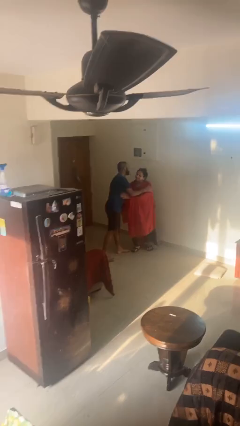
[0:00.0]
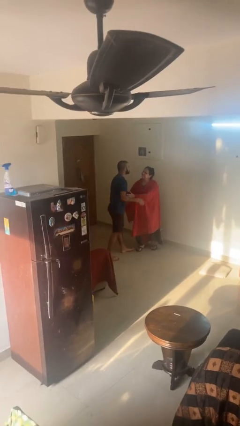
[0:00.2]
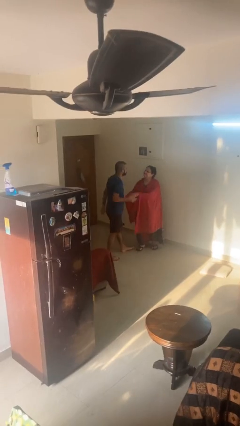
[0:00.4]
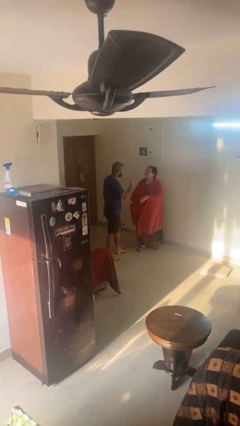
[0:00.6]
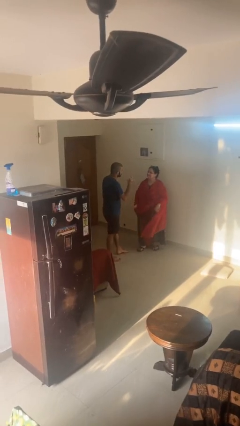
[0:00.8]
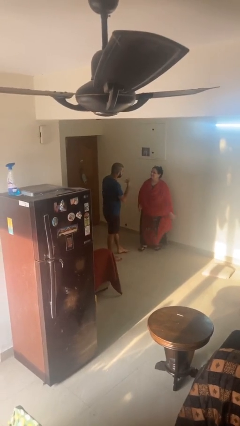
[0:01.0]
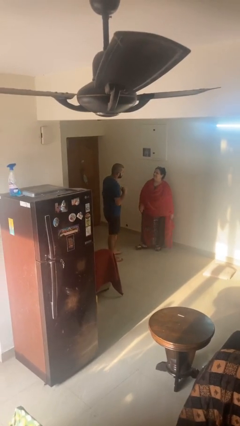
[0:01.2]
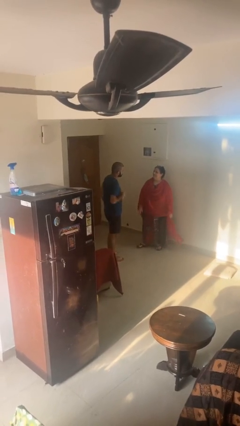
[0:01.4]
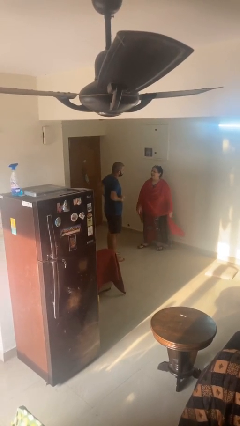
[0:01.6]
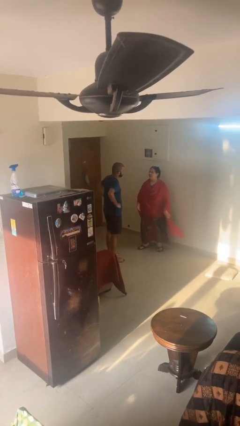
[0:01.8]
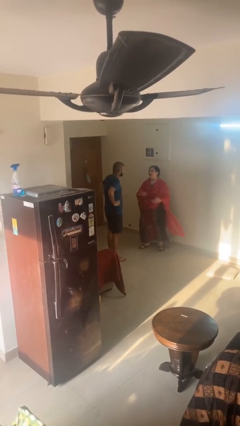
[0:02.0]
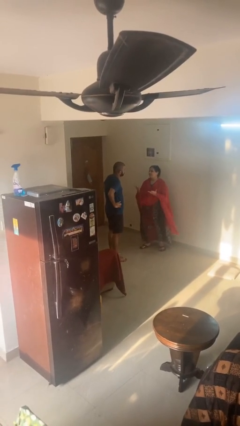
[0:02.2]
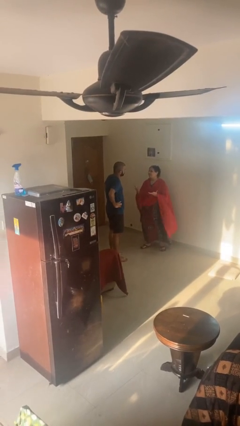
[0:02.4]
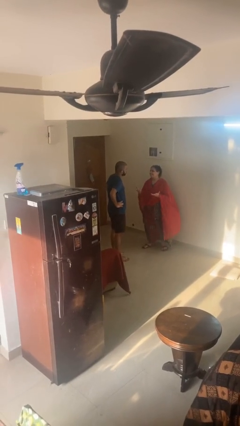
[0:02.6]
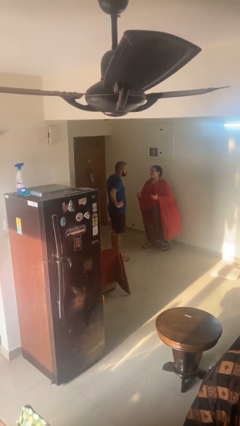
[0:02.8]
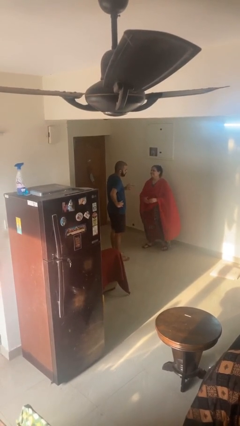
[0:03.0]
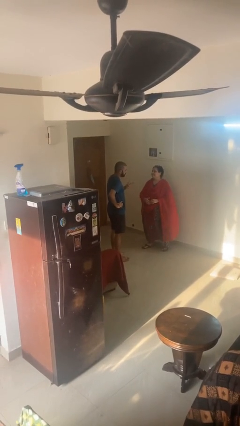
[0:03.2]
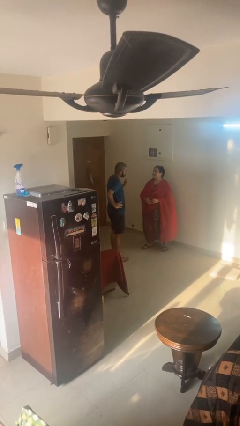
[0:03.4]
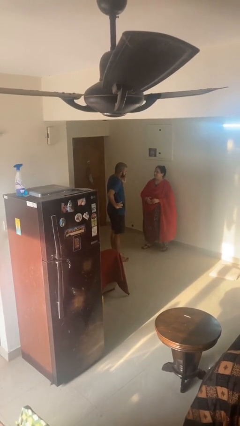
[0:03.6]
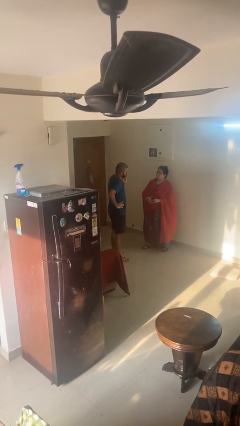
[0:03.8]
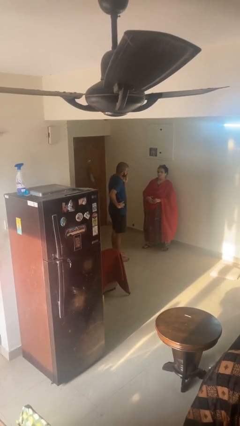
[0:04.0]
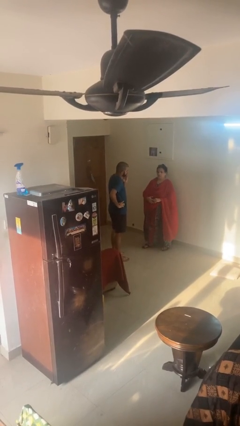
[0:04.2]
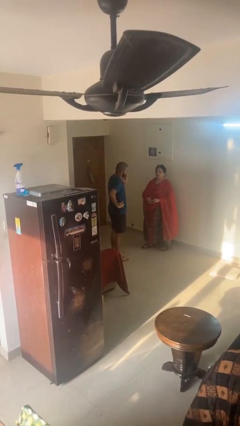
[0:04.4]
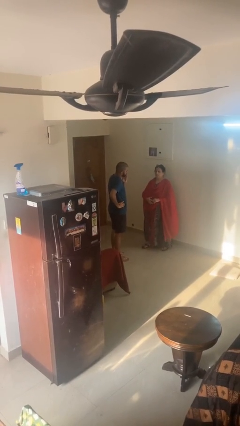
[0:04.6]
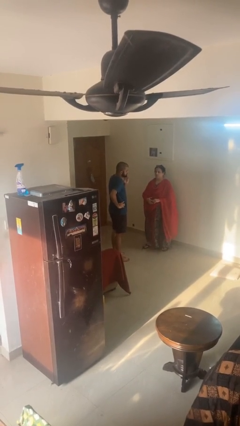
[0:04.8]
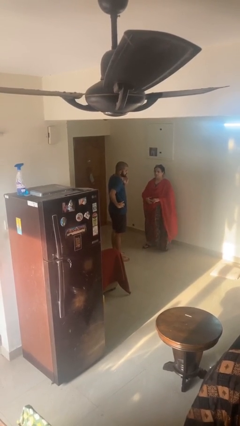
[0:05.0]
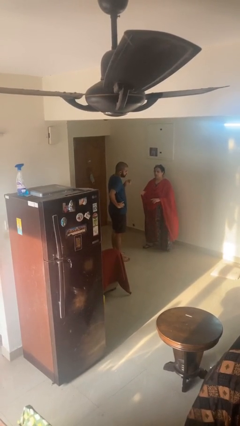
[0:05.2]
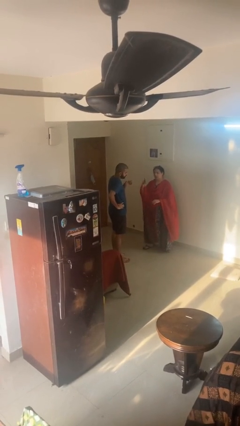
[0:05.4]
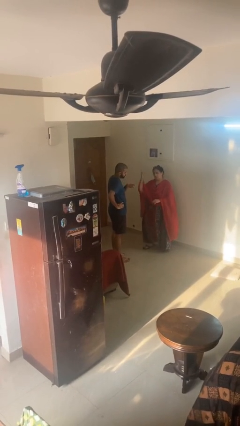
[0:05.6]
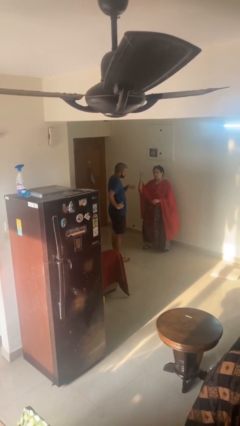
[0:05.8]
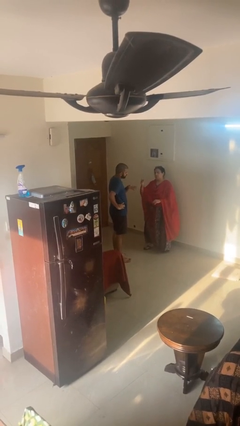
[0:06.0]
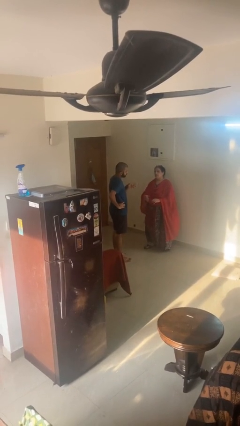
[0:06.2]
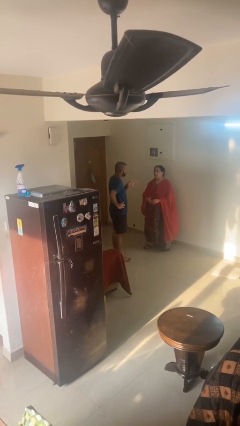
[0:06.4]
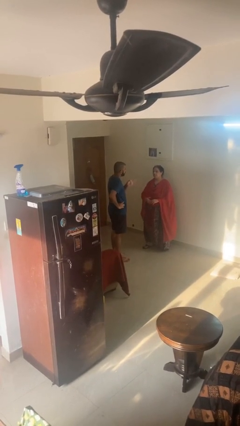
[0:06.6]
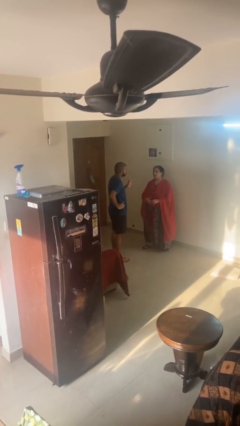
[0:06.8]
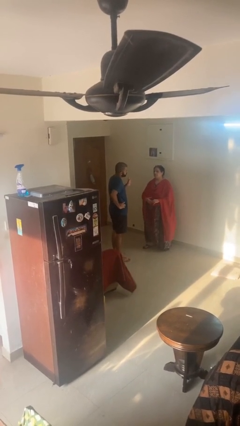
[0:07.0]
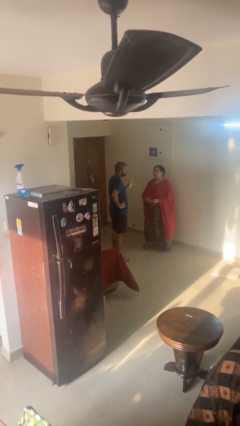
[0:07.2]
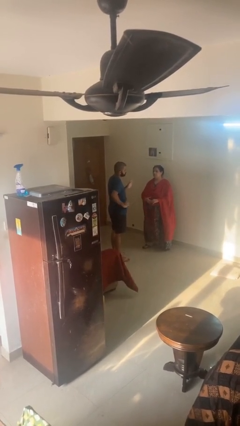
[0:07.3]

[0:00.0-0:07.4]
person talks to person

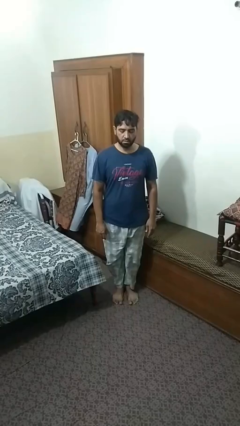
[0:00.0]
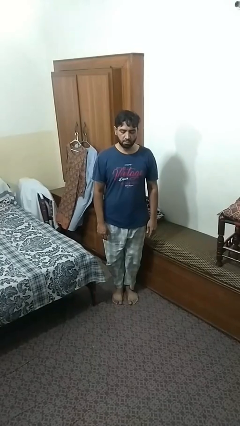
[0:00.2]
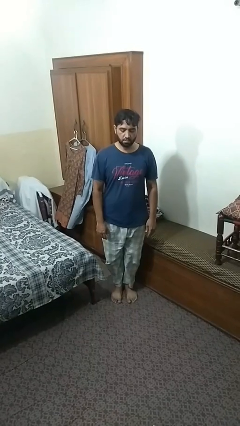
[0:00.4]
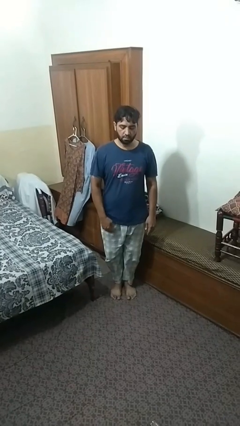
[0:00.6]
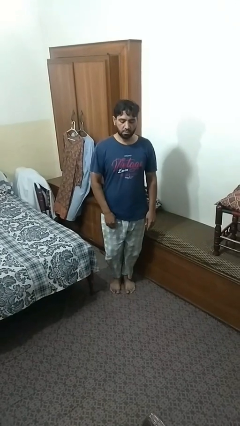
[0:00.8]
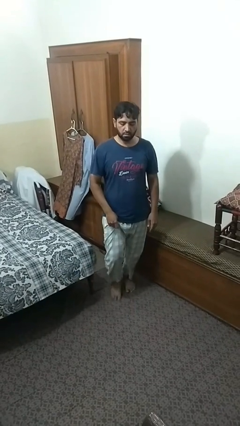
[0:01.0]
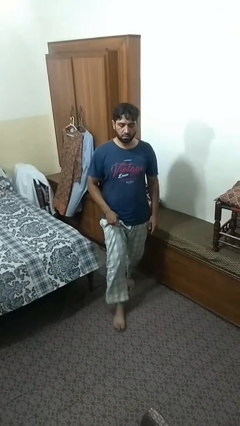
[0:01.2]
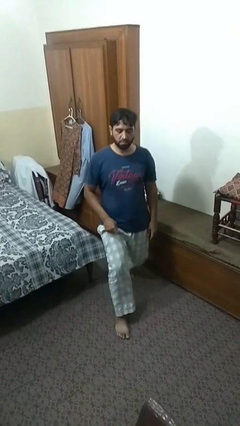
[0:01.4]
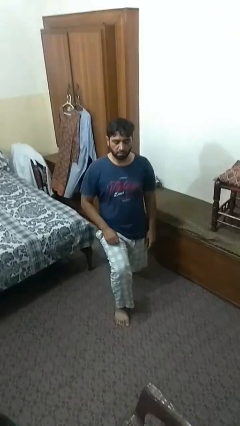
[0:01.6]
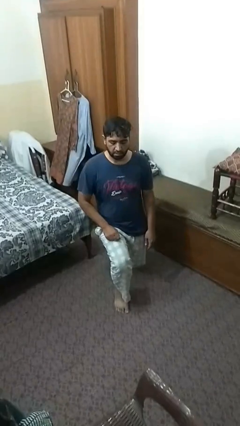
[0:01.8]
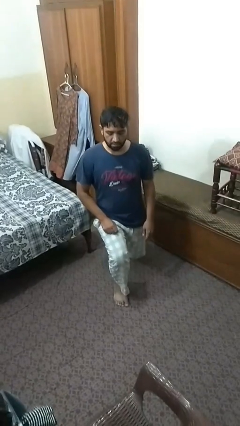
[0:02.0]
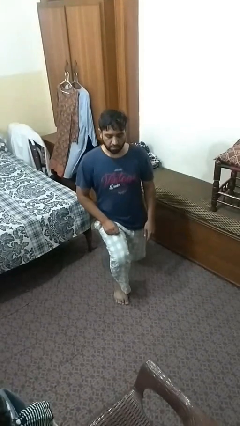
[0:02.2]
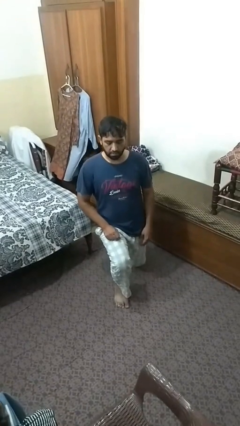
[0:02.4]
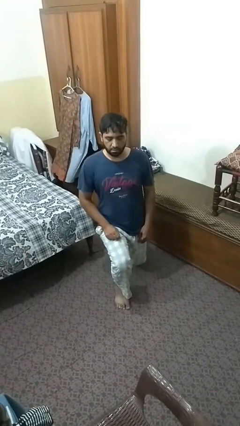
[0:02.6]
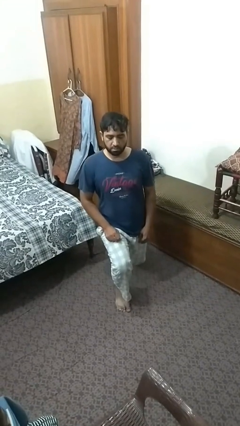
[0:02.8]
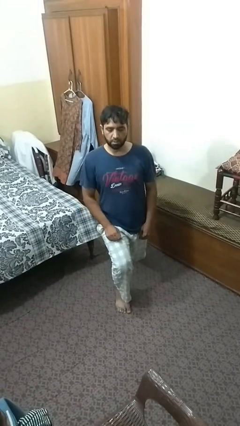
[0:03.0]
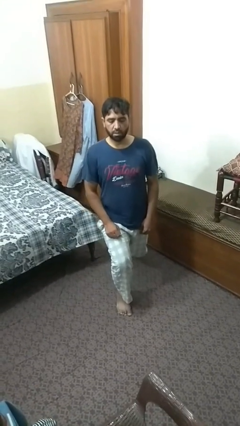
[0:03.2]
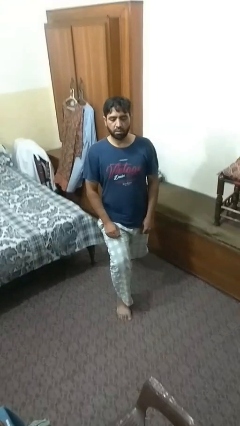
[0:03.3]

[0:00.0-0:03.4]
person exercises with lunges

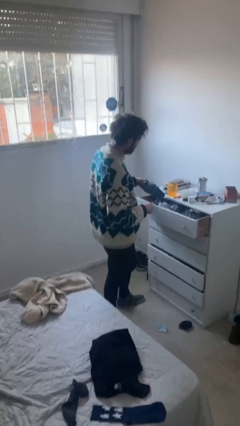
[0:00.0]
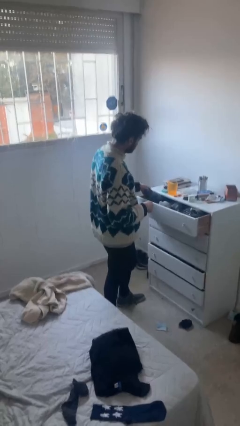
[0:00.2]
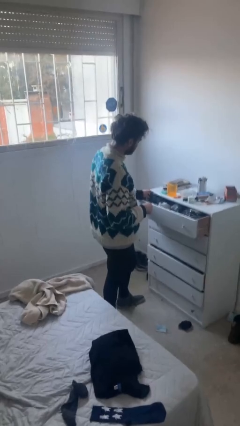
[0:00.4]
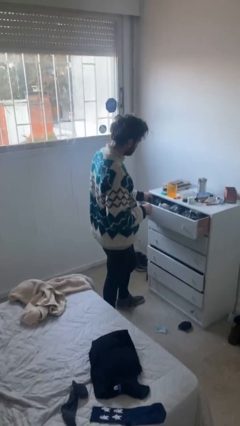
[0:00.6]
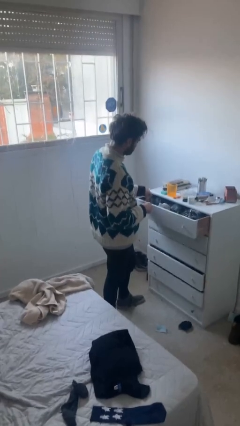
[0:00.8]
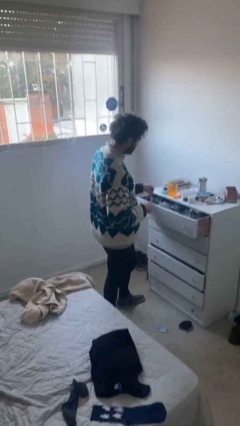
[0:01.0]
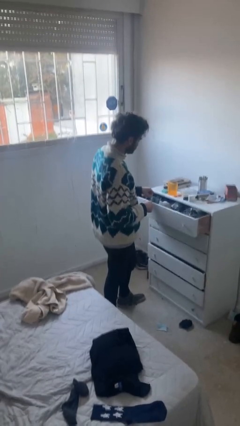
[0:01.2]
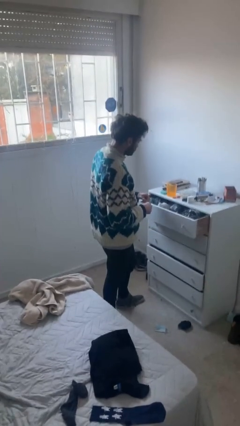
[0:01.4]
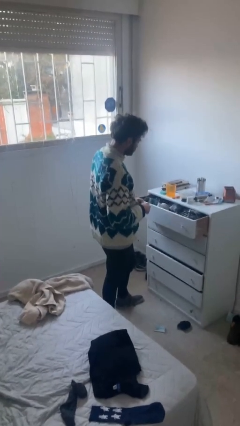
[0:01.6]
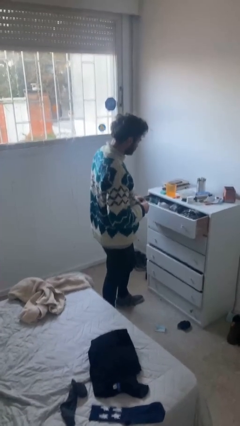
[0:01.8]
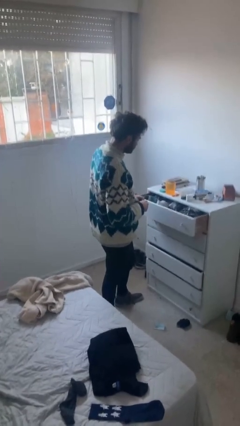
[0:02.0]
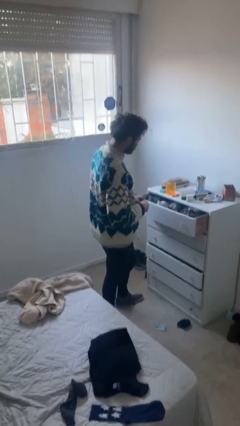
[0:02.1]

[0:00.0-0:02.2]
person puts clothes into dresser

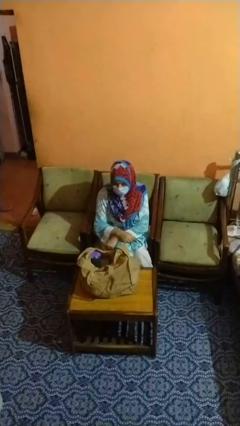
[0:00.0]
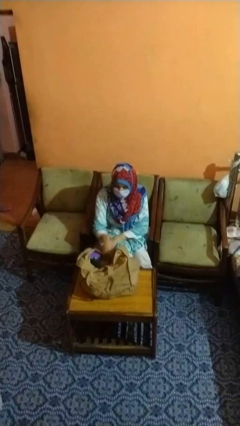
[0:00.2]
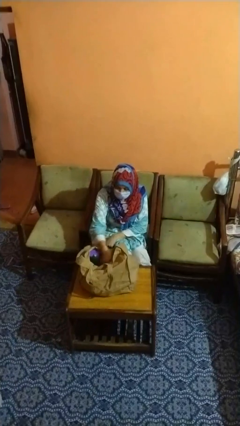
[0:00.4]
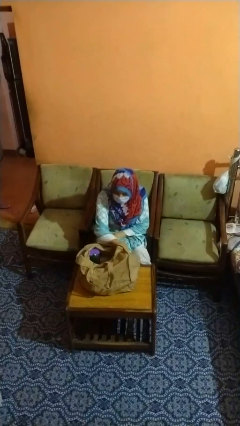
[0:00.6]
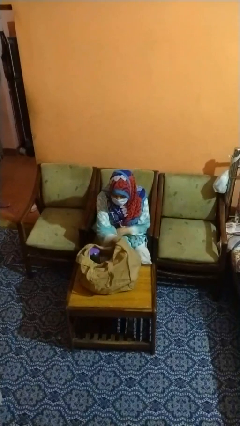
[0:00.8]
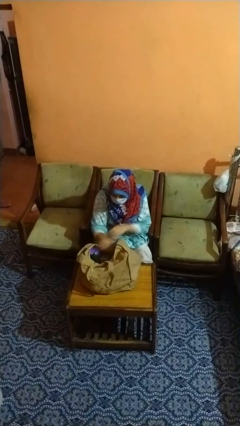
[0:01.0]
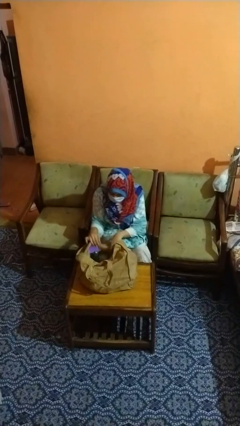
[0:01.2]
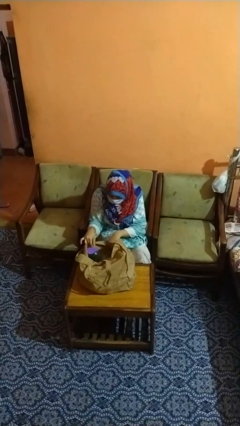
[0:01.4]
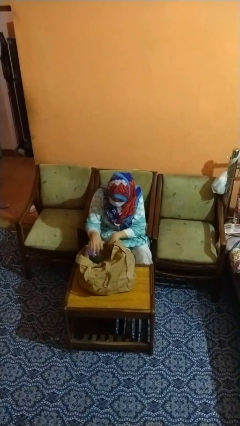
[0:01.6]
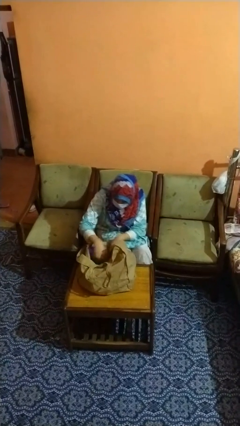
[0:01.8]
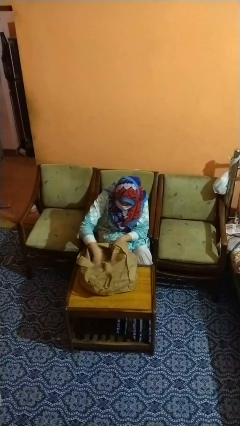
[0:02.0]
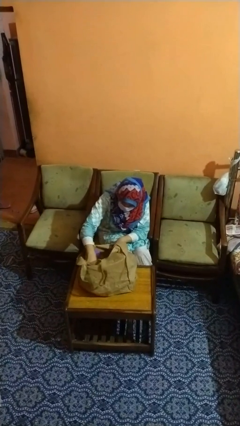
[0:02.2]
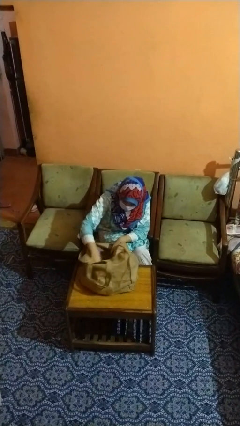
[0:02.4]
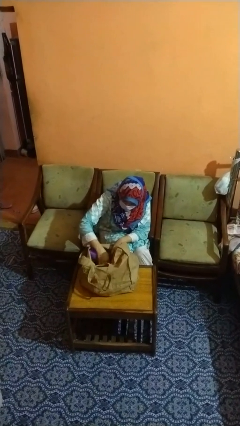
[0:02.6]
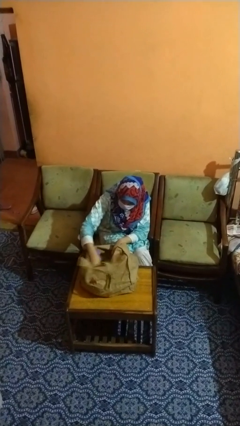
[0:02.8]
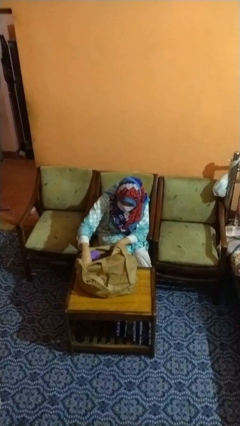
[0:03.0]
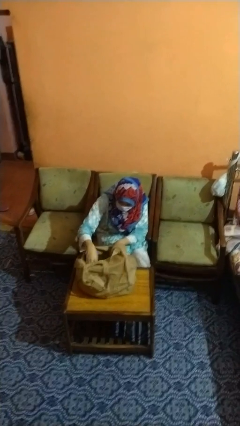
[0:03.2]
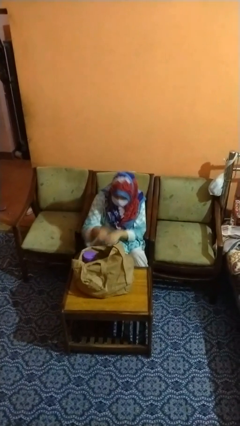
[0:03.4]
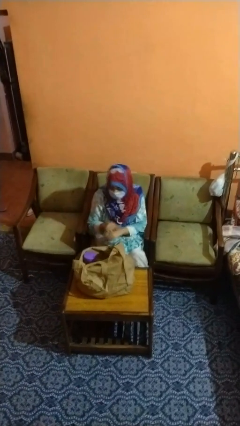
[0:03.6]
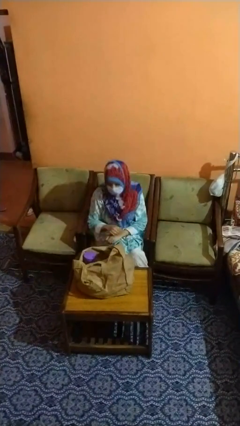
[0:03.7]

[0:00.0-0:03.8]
person searches in bag

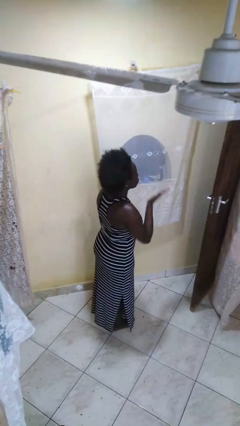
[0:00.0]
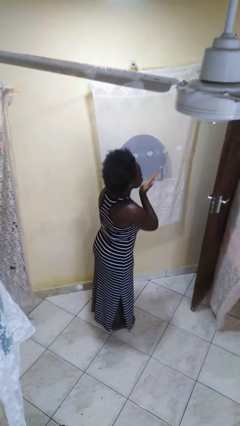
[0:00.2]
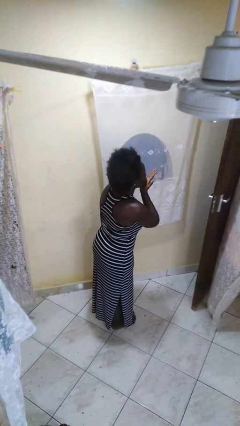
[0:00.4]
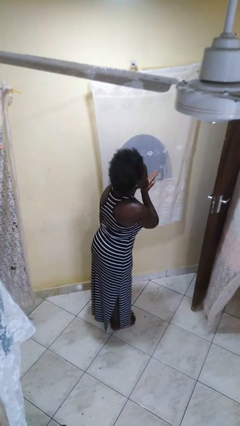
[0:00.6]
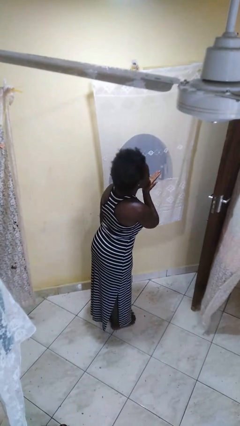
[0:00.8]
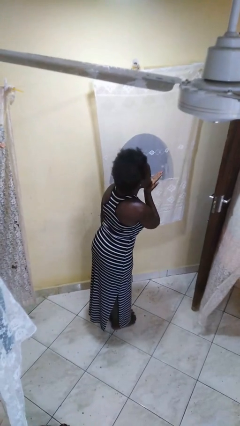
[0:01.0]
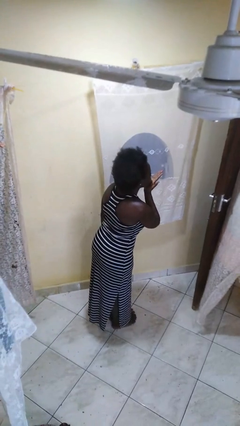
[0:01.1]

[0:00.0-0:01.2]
person gestures blow kiss
